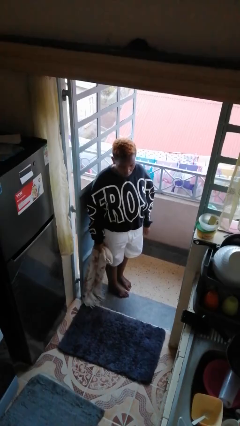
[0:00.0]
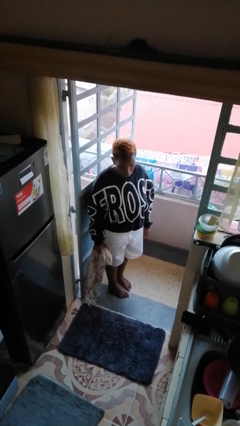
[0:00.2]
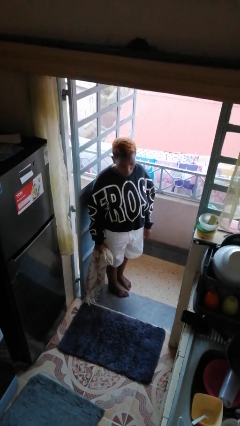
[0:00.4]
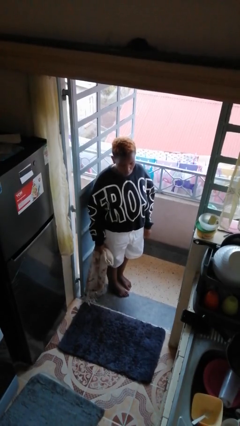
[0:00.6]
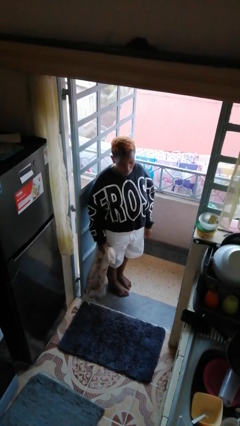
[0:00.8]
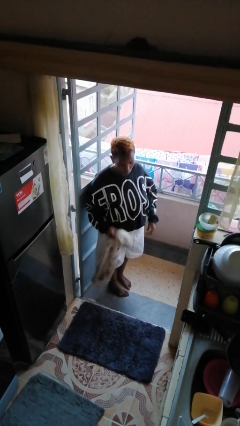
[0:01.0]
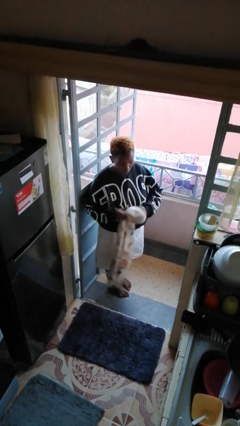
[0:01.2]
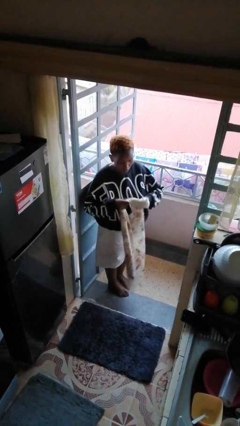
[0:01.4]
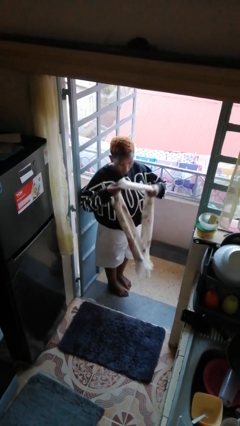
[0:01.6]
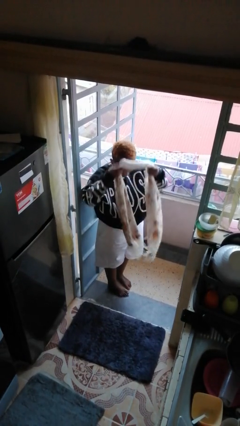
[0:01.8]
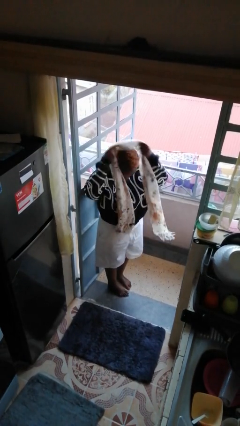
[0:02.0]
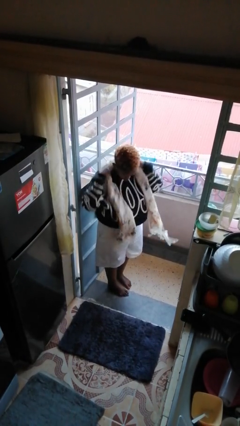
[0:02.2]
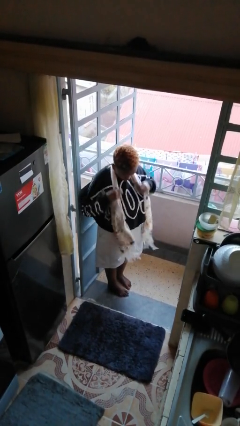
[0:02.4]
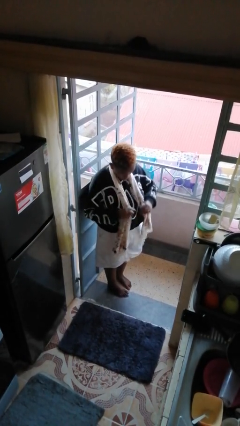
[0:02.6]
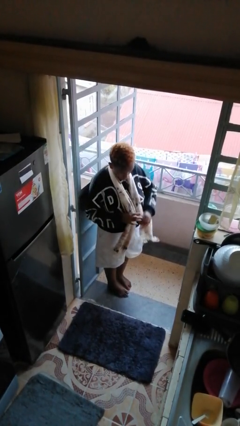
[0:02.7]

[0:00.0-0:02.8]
person puts on scarf

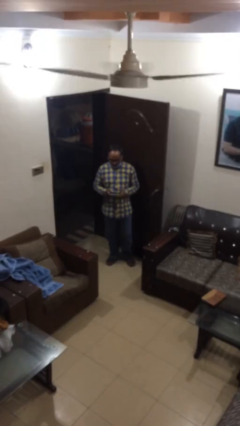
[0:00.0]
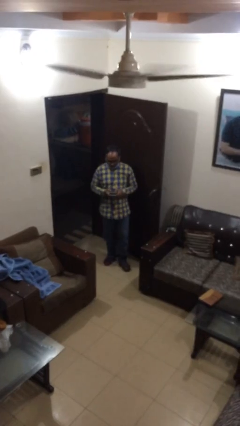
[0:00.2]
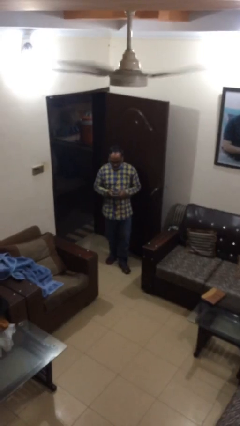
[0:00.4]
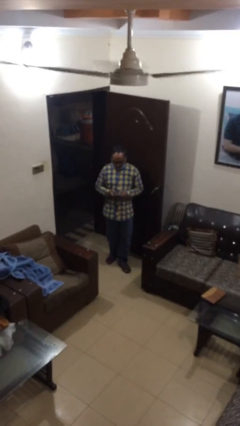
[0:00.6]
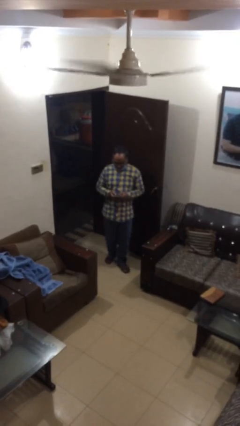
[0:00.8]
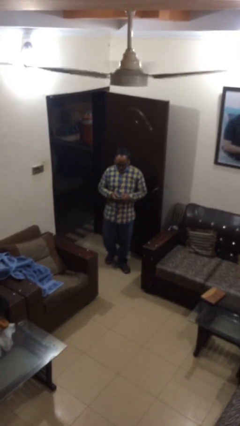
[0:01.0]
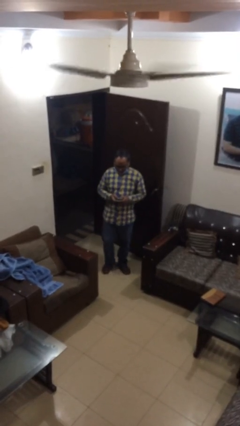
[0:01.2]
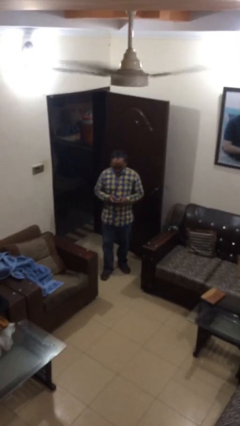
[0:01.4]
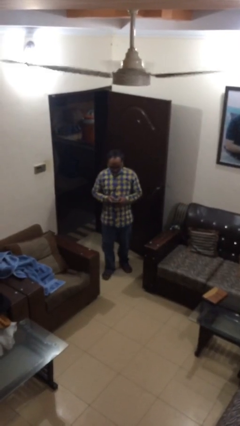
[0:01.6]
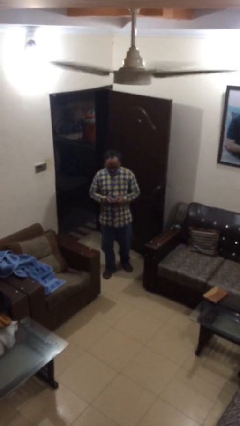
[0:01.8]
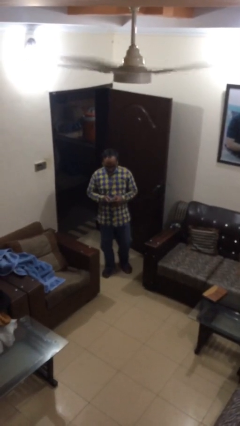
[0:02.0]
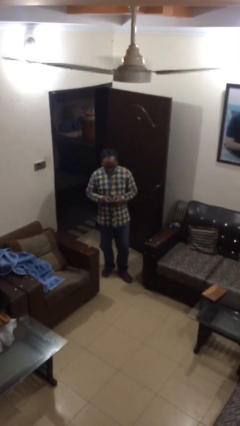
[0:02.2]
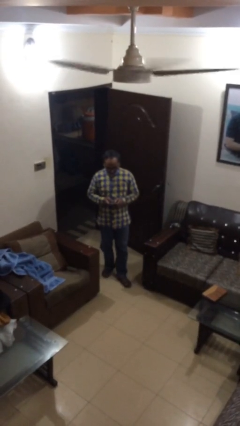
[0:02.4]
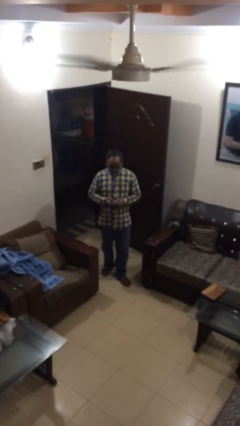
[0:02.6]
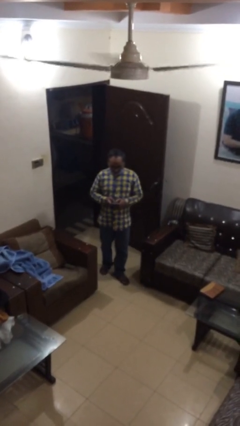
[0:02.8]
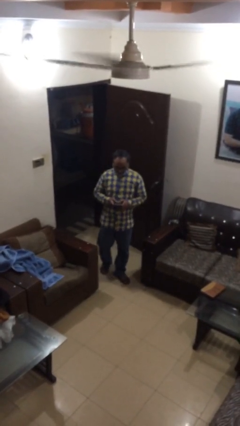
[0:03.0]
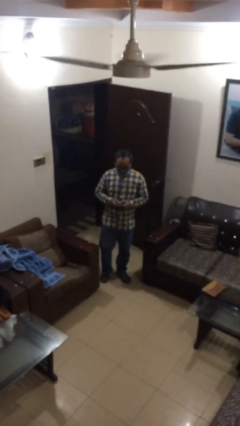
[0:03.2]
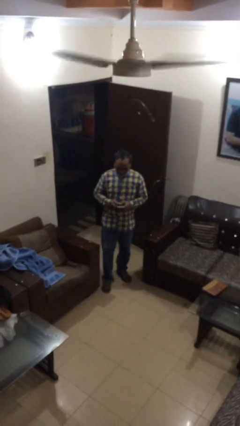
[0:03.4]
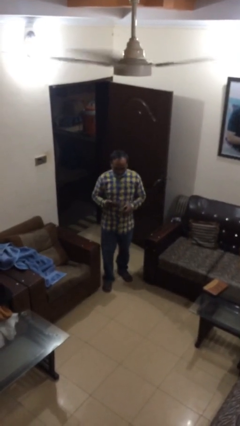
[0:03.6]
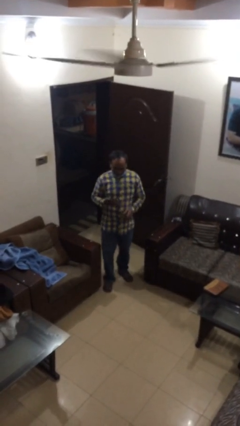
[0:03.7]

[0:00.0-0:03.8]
person texts on phone

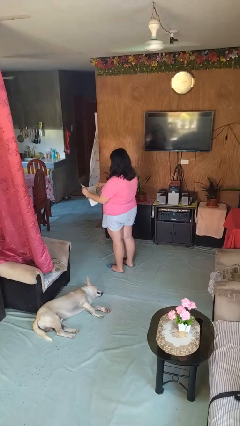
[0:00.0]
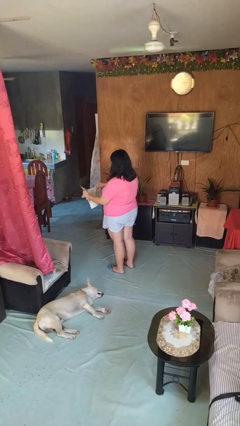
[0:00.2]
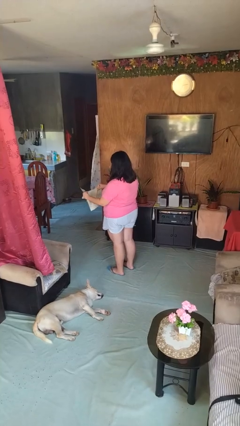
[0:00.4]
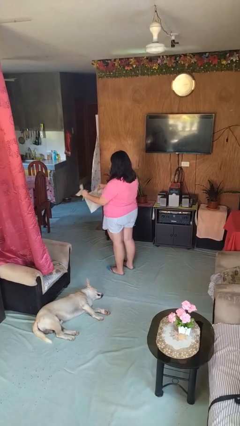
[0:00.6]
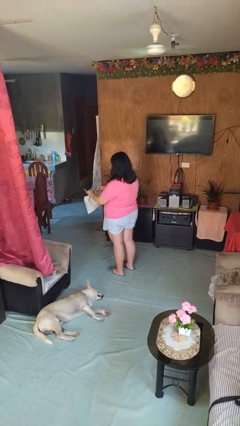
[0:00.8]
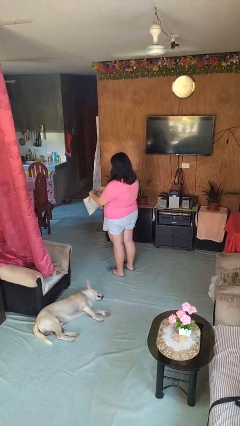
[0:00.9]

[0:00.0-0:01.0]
person tears paper

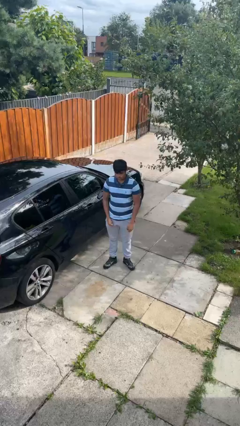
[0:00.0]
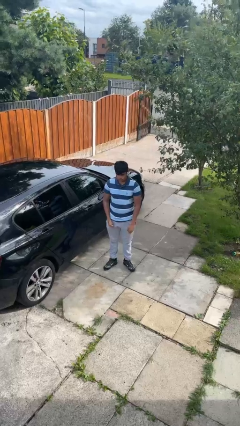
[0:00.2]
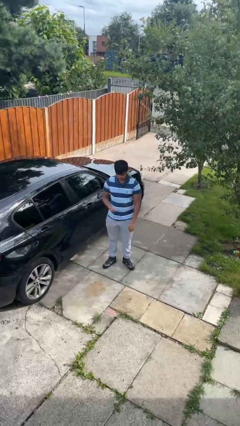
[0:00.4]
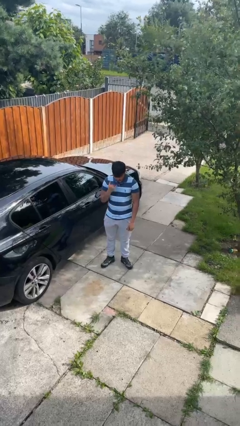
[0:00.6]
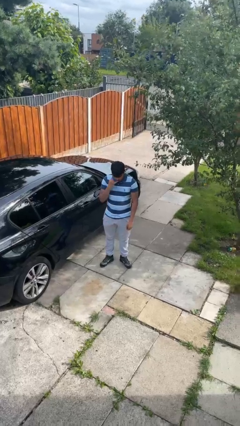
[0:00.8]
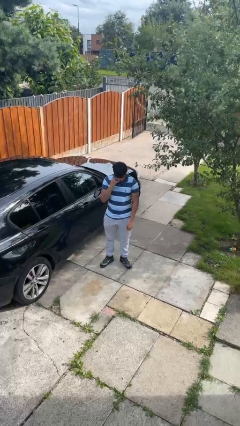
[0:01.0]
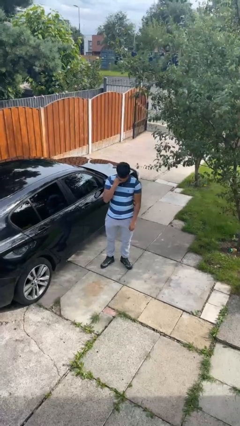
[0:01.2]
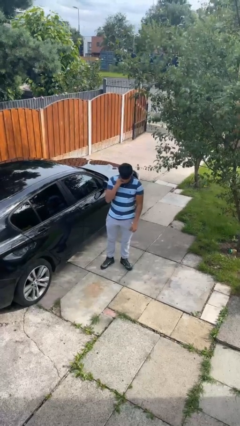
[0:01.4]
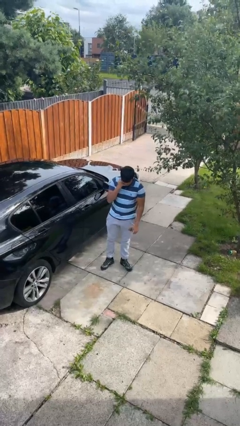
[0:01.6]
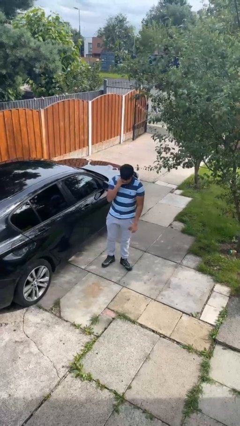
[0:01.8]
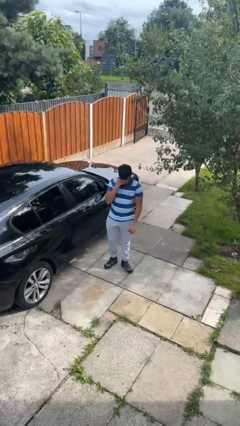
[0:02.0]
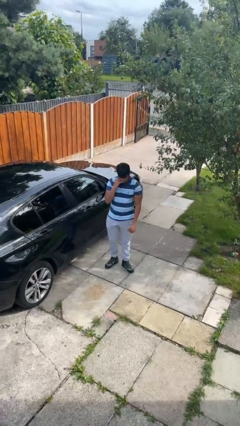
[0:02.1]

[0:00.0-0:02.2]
person licks fingers

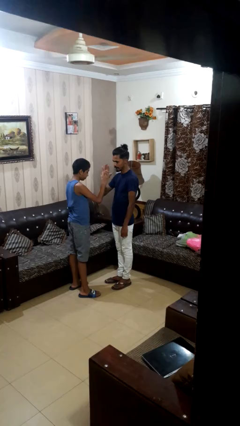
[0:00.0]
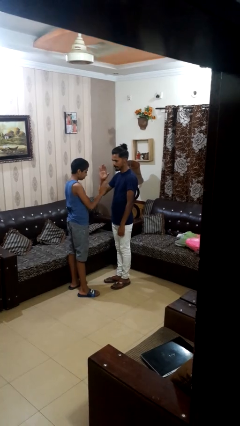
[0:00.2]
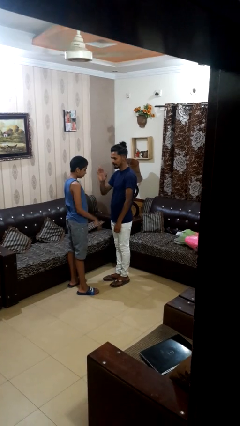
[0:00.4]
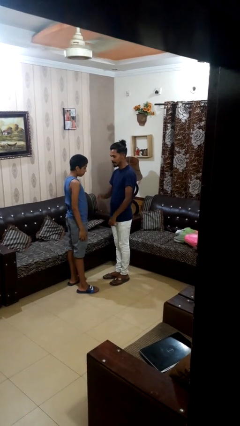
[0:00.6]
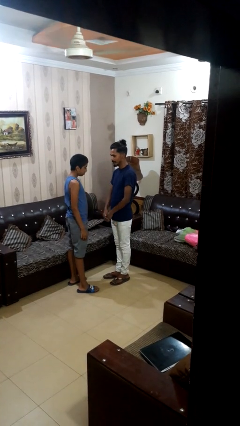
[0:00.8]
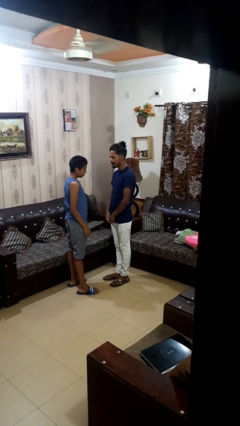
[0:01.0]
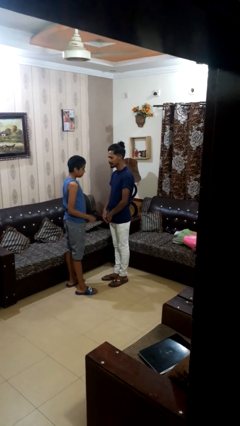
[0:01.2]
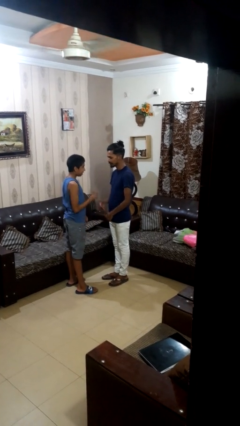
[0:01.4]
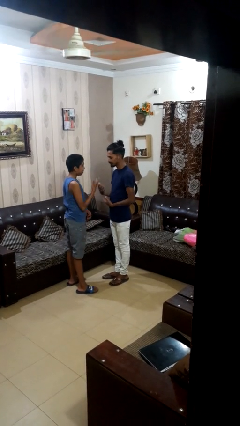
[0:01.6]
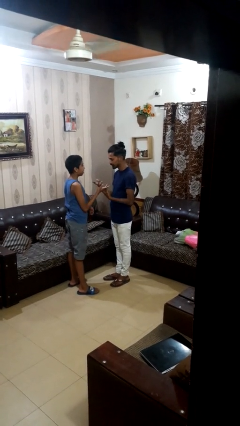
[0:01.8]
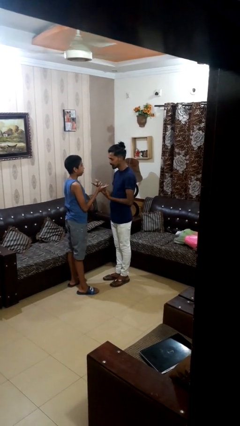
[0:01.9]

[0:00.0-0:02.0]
person highfives hand

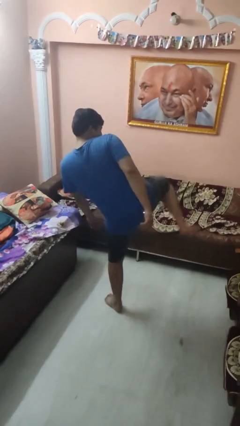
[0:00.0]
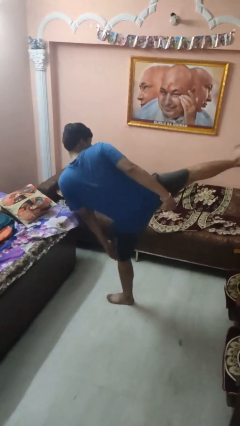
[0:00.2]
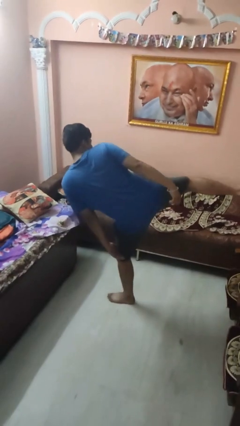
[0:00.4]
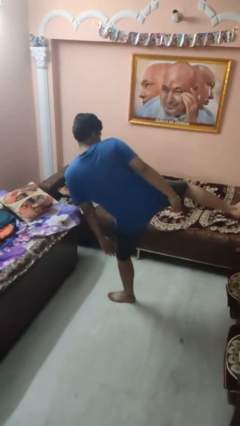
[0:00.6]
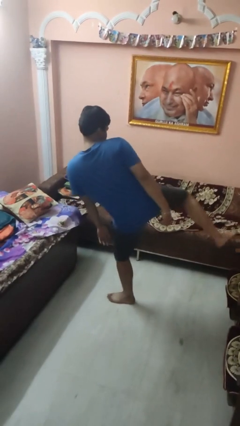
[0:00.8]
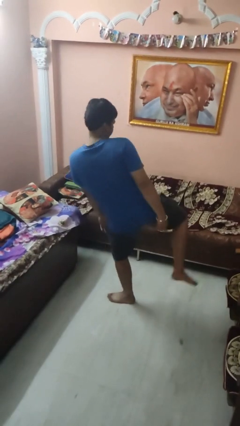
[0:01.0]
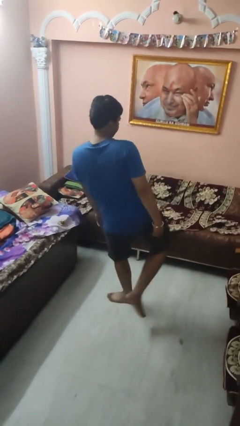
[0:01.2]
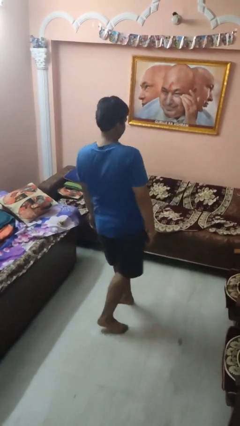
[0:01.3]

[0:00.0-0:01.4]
person karate kicks

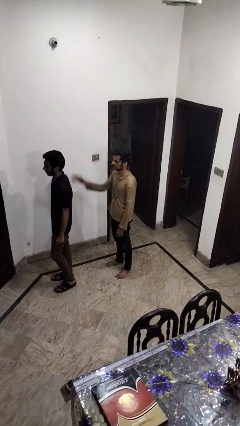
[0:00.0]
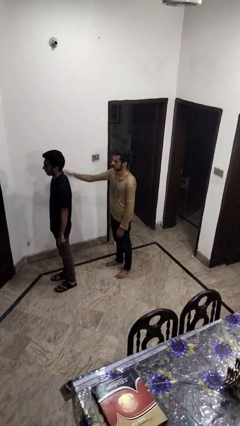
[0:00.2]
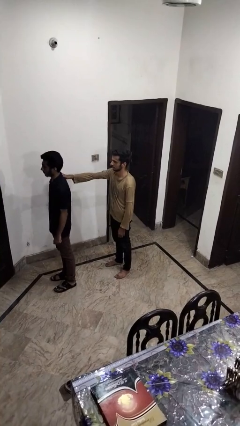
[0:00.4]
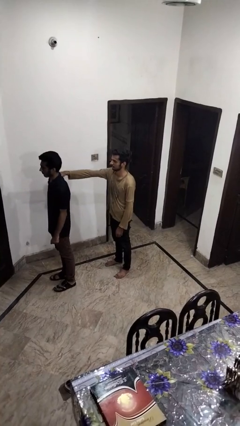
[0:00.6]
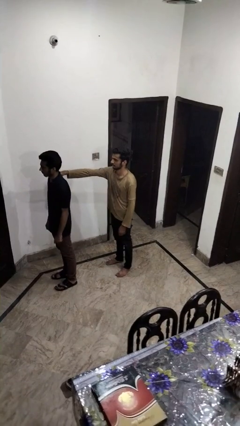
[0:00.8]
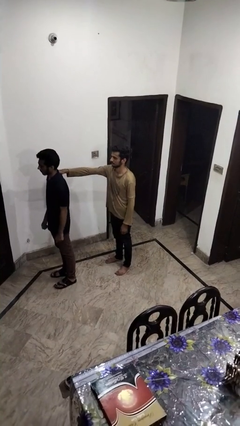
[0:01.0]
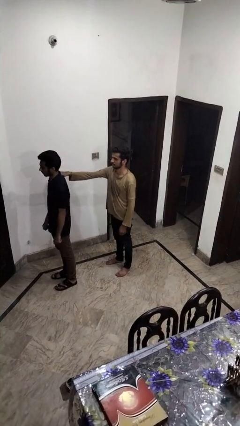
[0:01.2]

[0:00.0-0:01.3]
person grabs person by shoulder

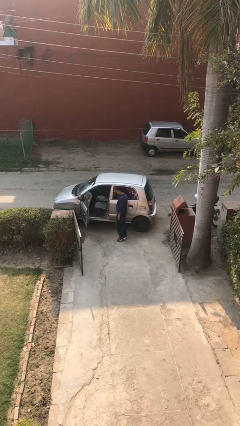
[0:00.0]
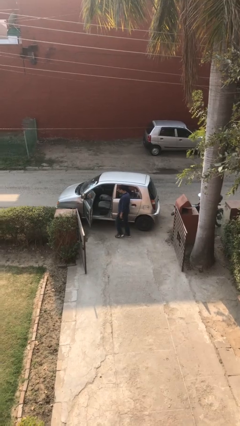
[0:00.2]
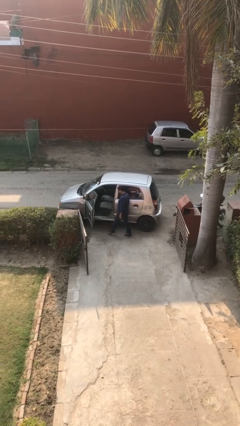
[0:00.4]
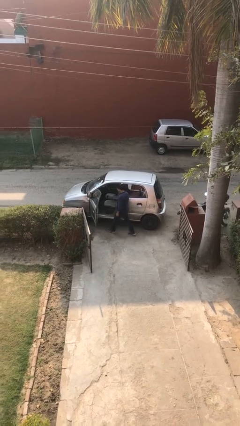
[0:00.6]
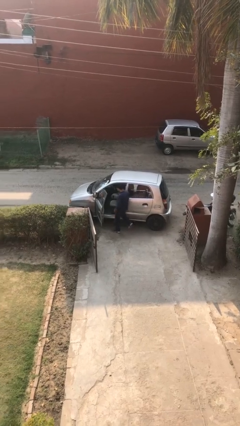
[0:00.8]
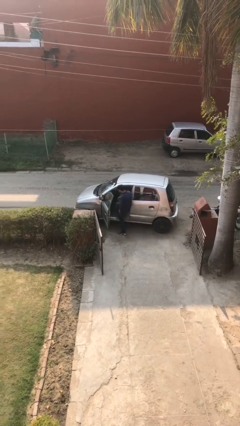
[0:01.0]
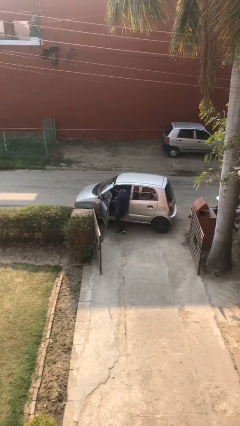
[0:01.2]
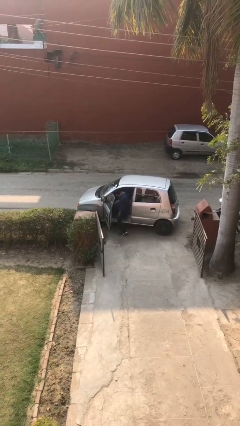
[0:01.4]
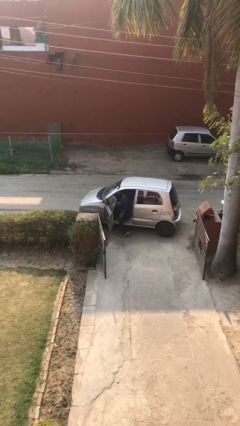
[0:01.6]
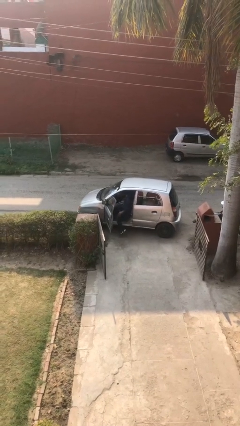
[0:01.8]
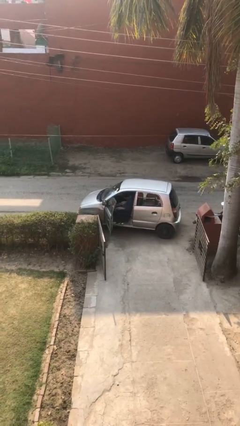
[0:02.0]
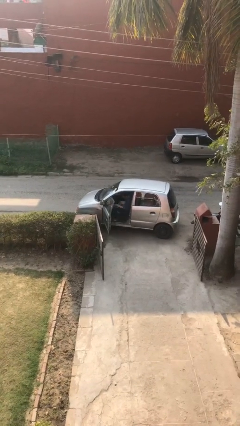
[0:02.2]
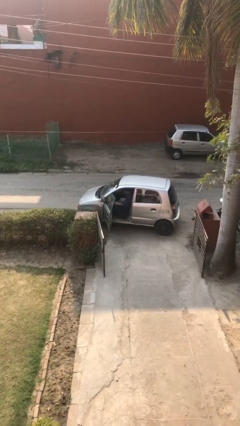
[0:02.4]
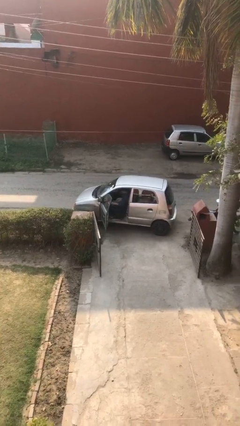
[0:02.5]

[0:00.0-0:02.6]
person enters car
